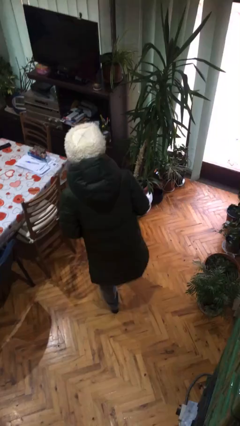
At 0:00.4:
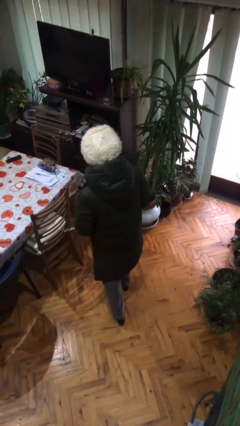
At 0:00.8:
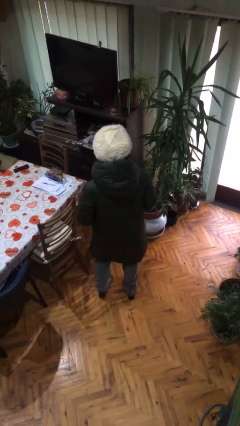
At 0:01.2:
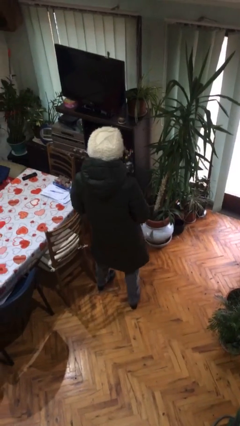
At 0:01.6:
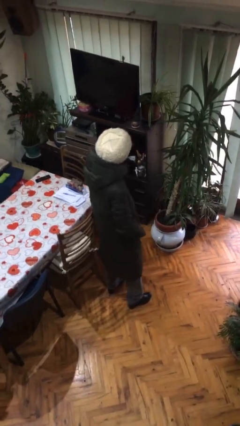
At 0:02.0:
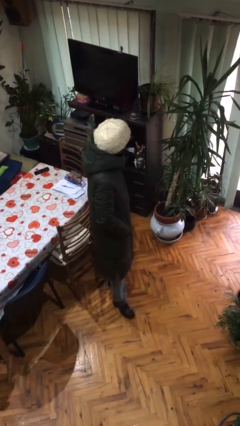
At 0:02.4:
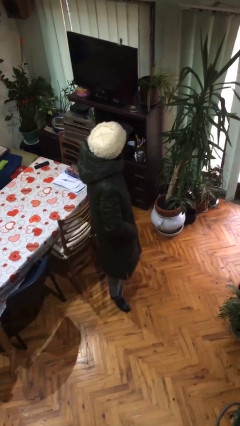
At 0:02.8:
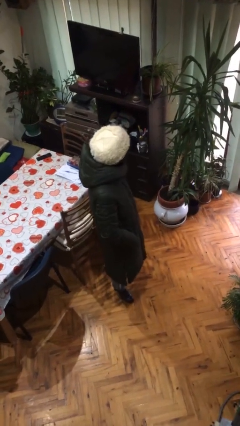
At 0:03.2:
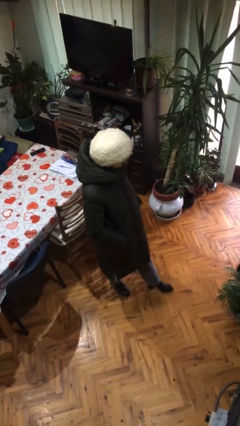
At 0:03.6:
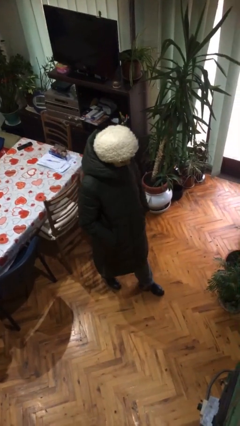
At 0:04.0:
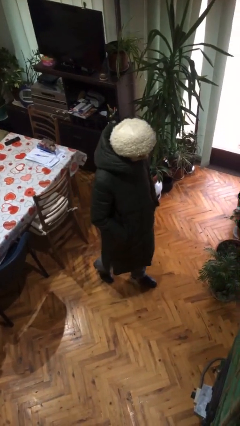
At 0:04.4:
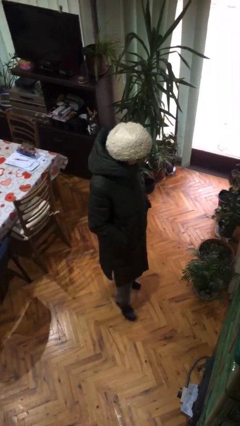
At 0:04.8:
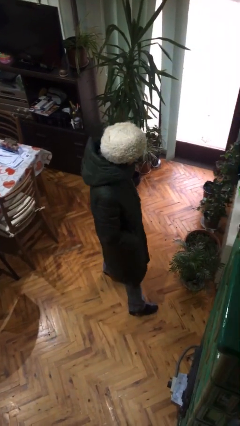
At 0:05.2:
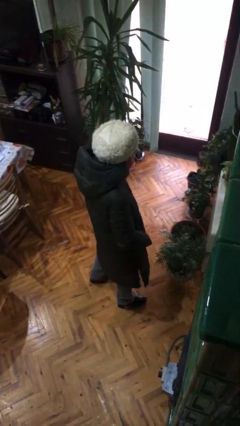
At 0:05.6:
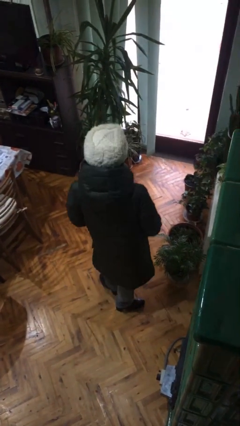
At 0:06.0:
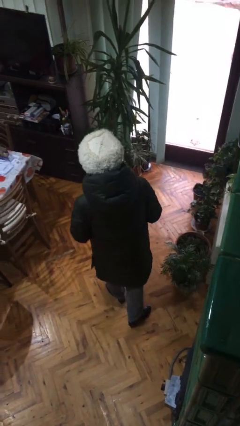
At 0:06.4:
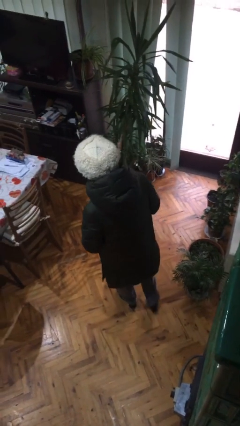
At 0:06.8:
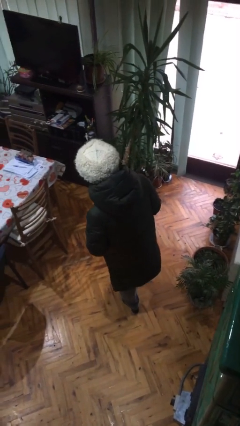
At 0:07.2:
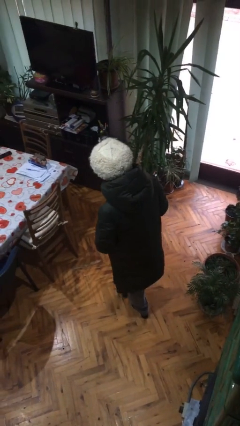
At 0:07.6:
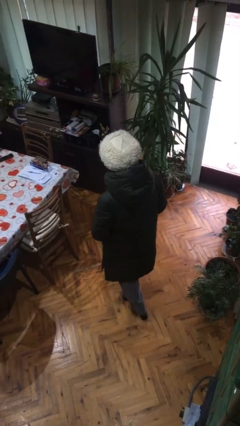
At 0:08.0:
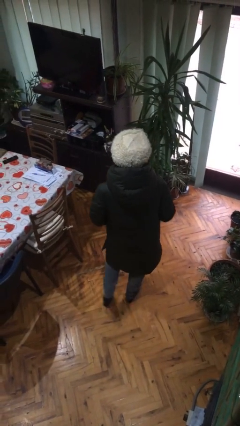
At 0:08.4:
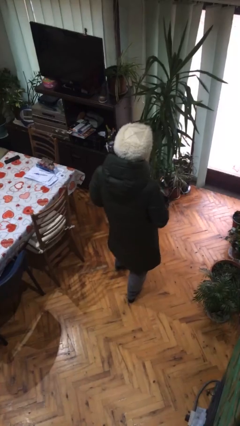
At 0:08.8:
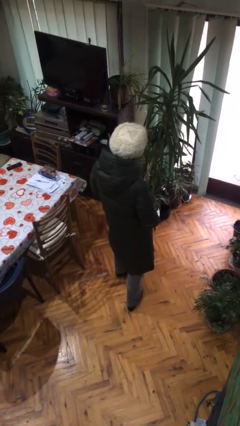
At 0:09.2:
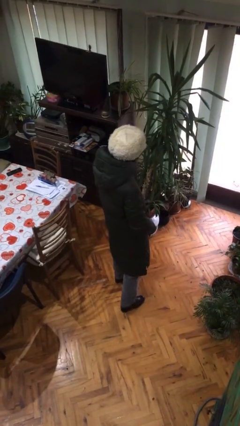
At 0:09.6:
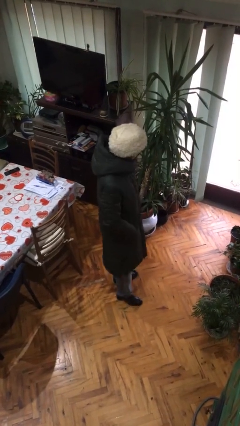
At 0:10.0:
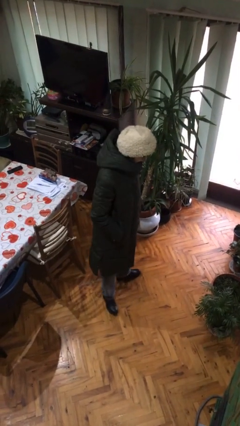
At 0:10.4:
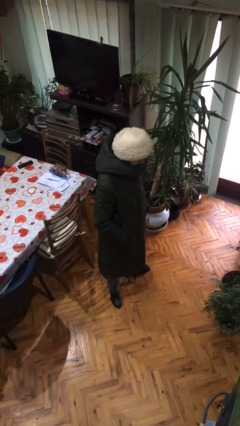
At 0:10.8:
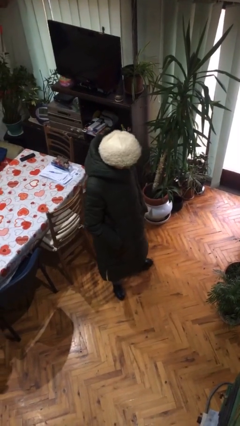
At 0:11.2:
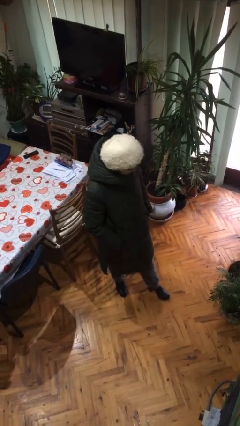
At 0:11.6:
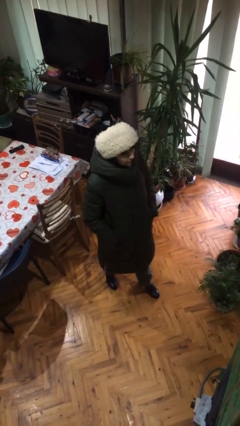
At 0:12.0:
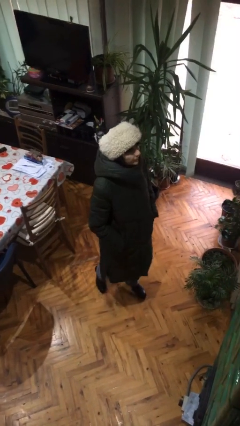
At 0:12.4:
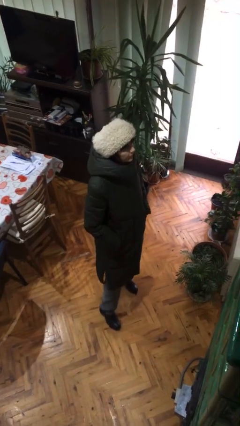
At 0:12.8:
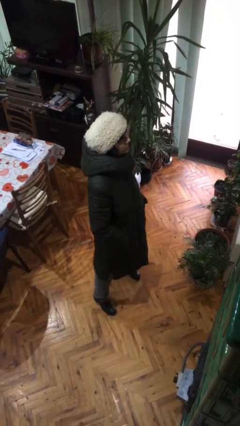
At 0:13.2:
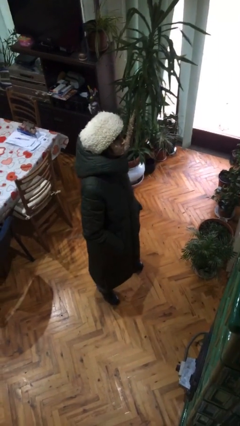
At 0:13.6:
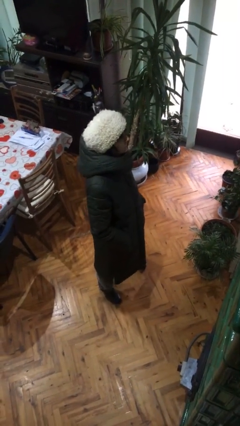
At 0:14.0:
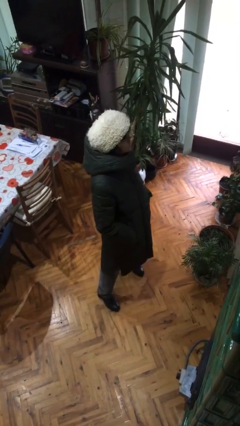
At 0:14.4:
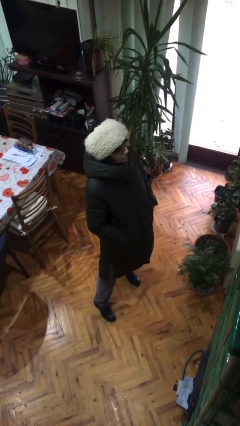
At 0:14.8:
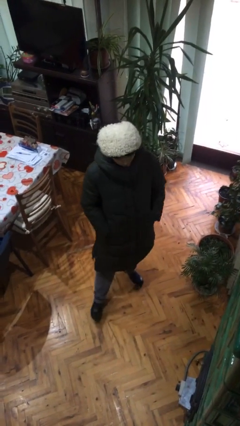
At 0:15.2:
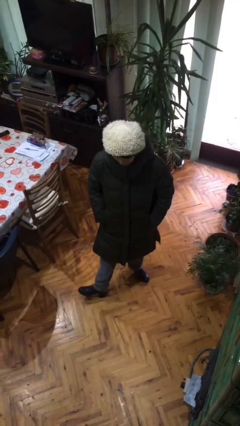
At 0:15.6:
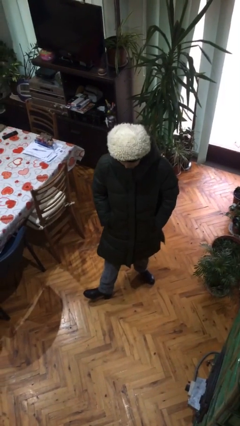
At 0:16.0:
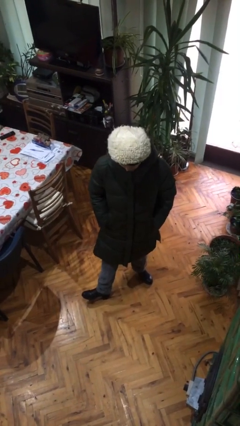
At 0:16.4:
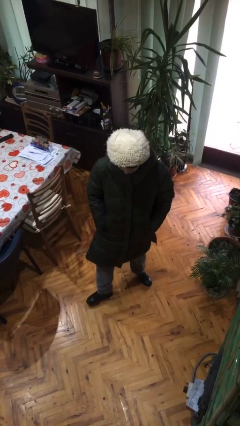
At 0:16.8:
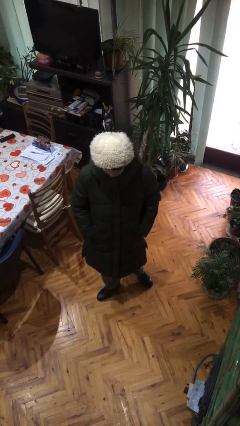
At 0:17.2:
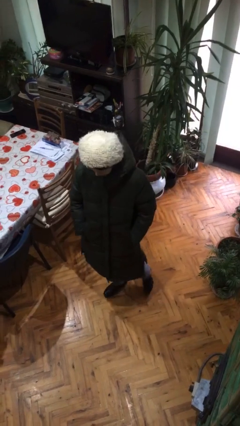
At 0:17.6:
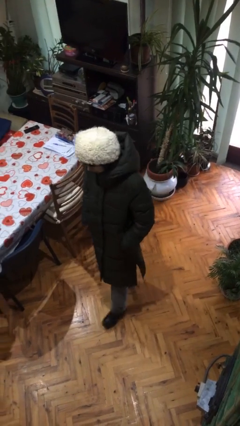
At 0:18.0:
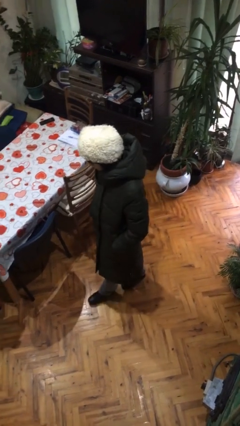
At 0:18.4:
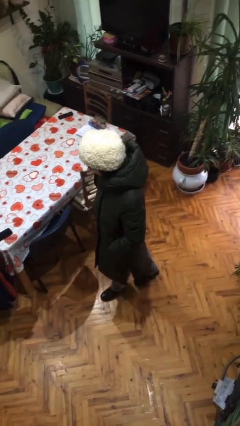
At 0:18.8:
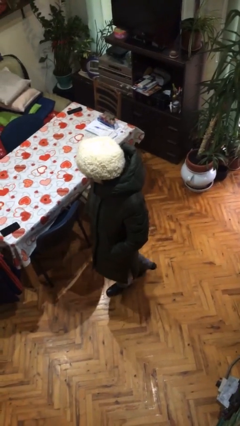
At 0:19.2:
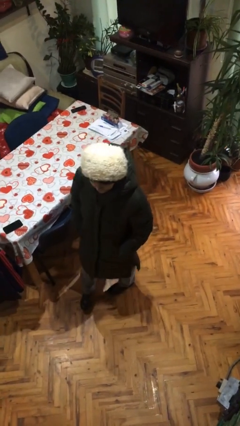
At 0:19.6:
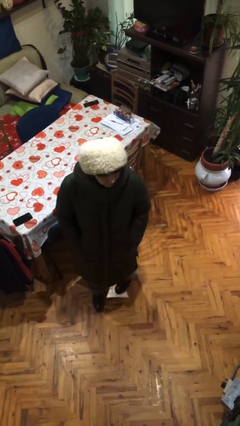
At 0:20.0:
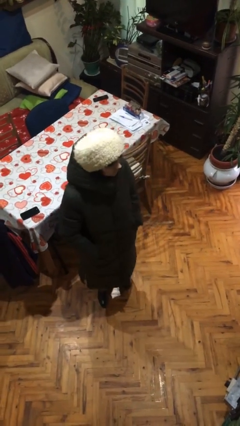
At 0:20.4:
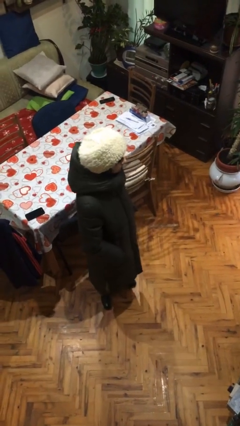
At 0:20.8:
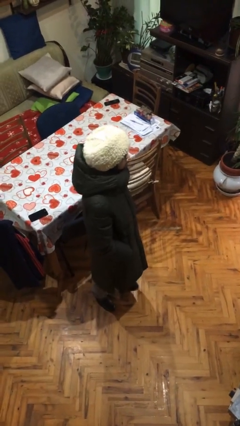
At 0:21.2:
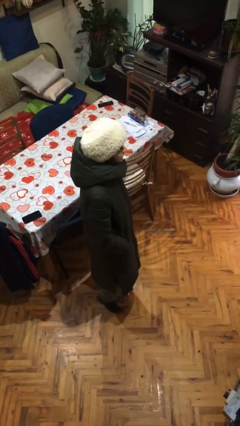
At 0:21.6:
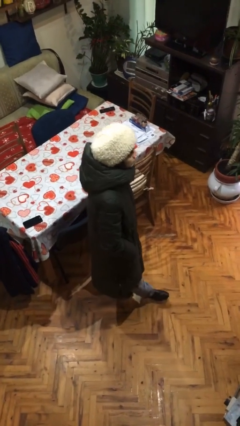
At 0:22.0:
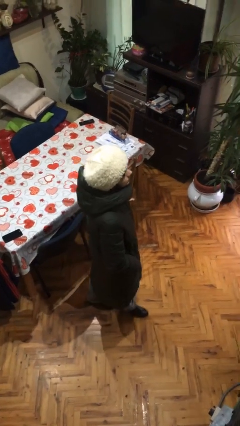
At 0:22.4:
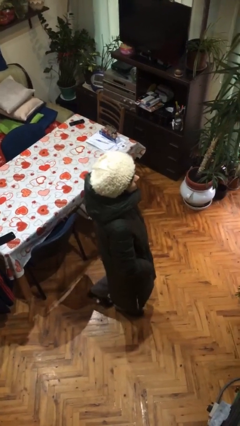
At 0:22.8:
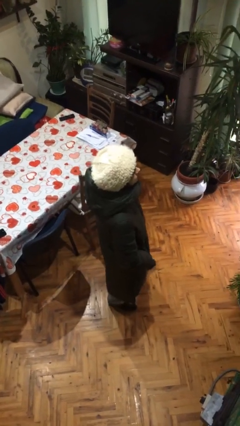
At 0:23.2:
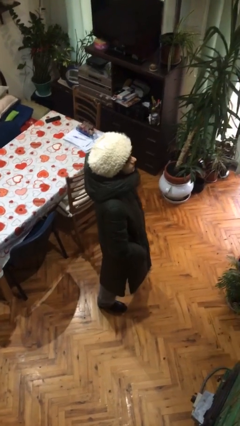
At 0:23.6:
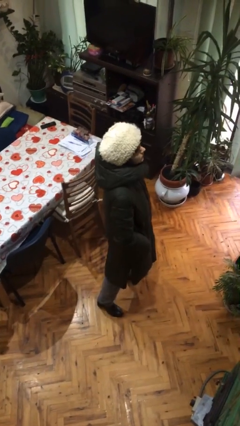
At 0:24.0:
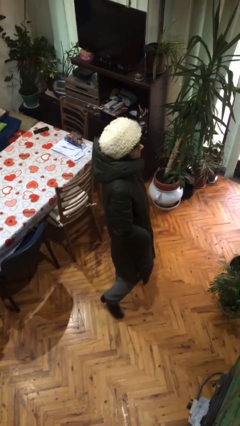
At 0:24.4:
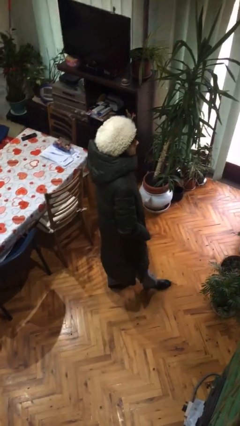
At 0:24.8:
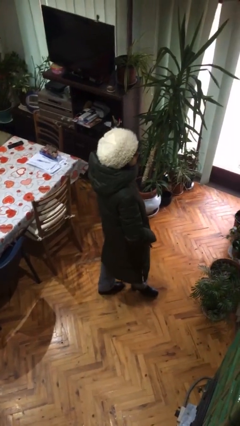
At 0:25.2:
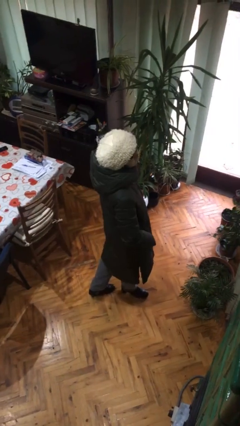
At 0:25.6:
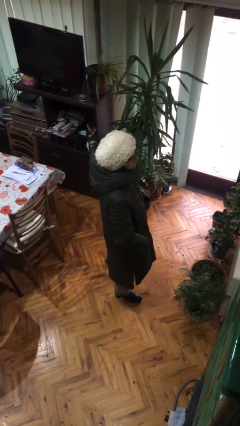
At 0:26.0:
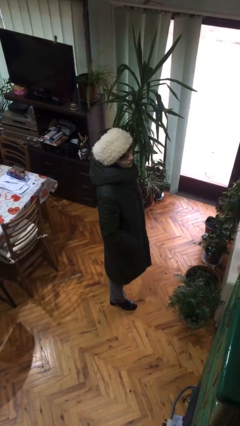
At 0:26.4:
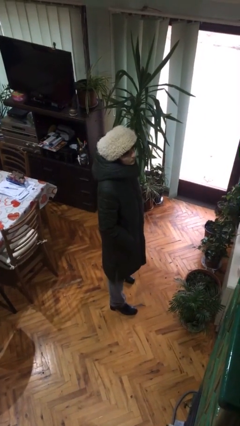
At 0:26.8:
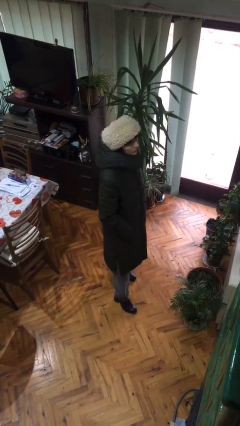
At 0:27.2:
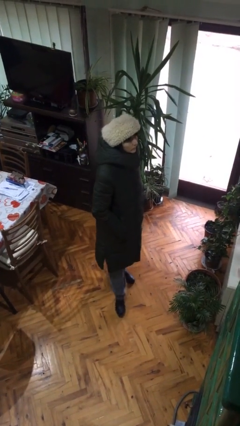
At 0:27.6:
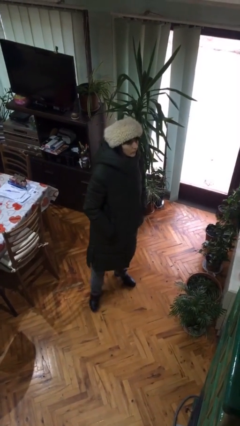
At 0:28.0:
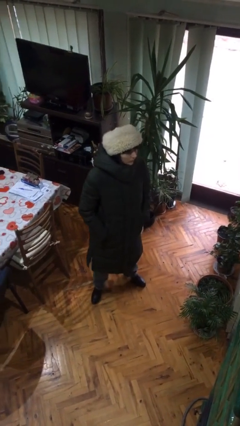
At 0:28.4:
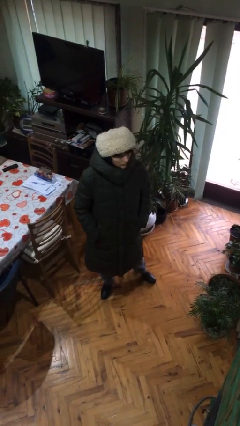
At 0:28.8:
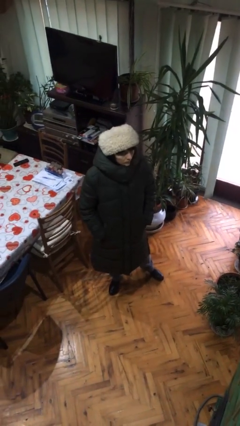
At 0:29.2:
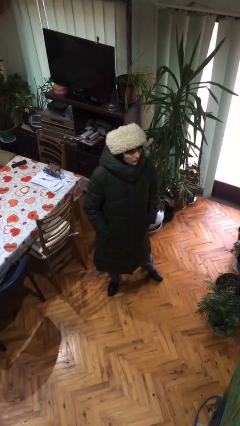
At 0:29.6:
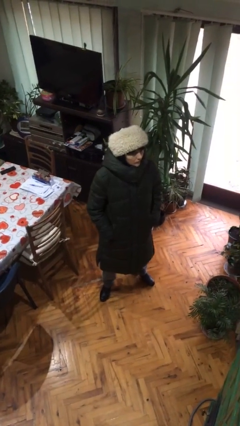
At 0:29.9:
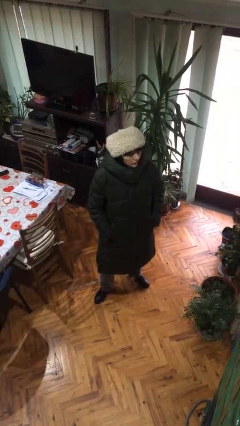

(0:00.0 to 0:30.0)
person walks

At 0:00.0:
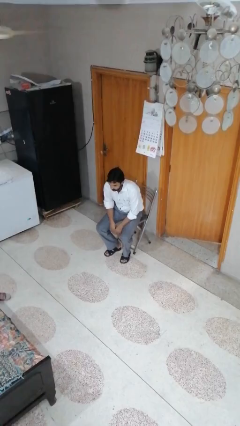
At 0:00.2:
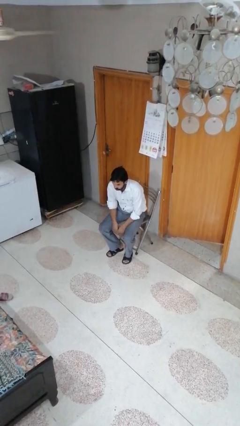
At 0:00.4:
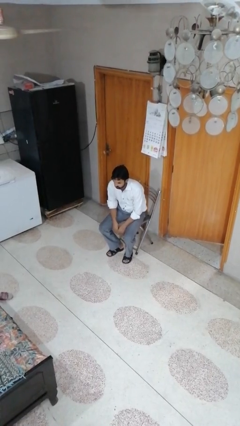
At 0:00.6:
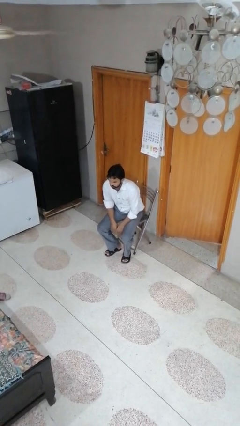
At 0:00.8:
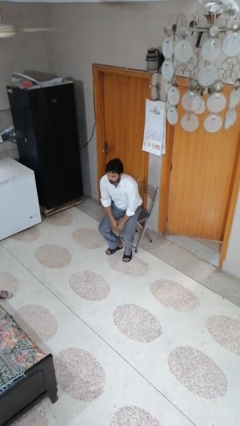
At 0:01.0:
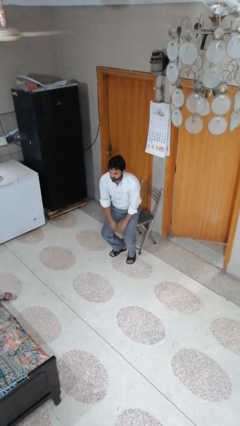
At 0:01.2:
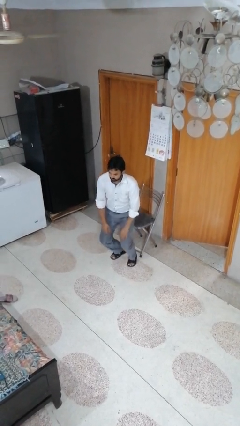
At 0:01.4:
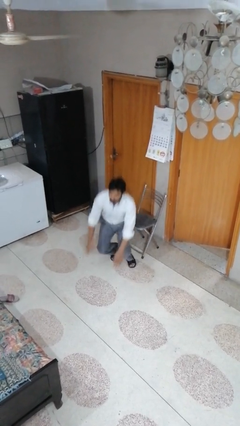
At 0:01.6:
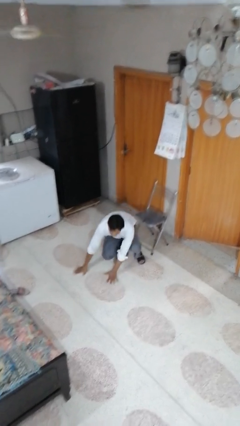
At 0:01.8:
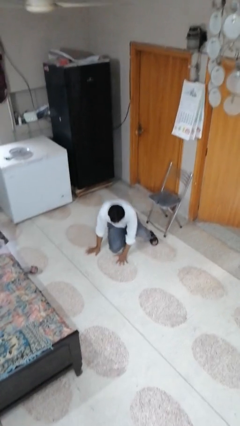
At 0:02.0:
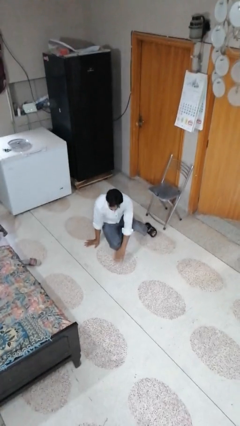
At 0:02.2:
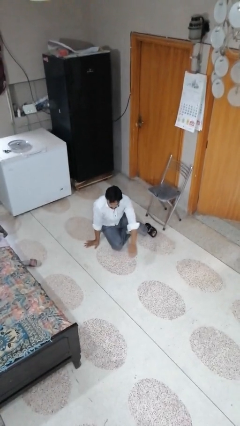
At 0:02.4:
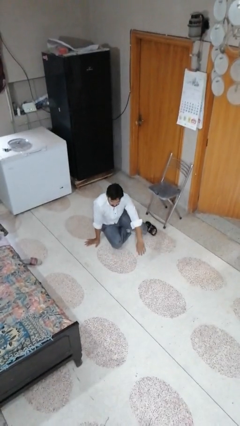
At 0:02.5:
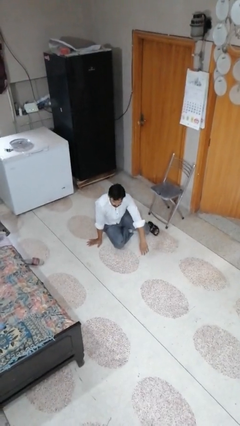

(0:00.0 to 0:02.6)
person falls from chair

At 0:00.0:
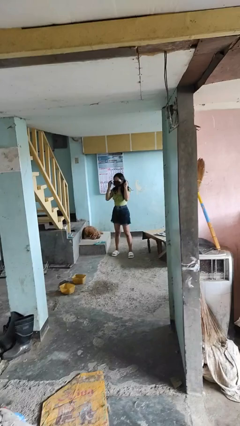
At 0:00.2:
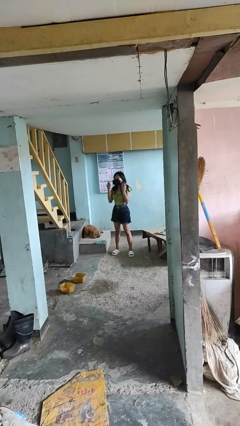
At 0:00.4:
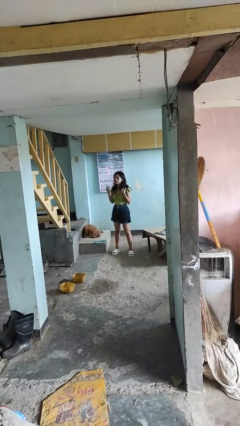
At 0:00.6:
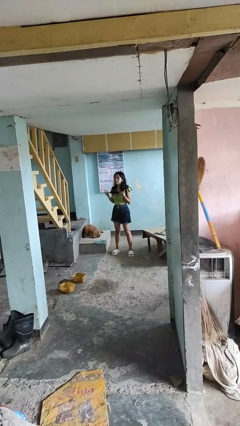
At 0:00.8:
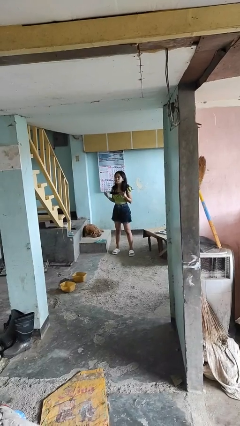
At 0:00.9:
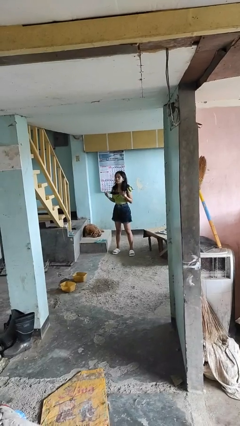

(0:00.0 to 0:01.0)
person takes off facemask
